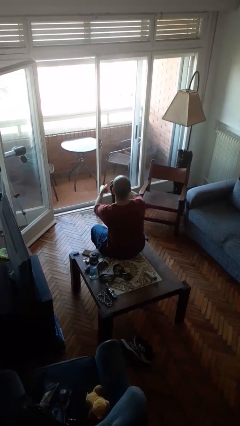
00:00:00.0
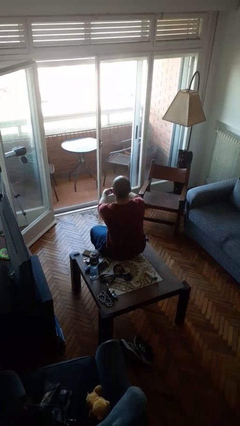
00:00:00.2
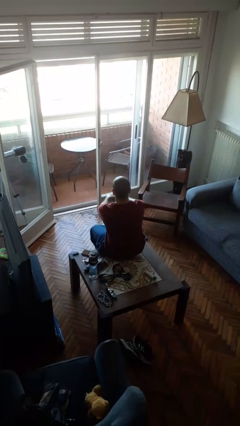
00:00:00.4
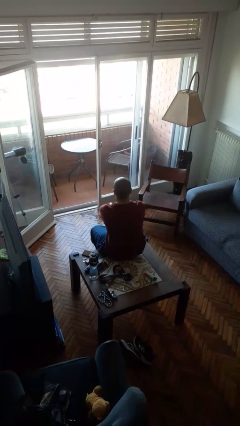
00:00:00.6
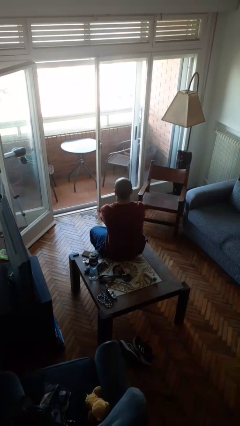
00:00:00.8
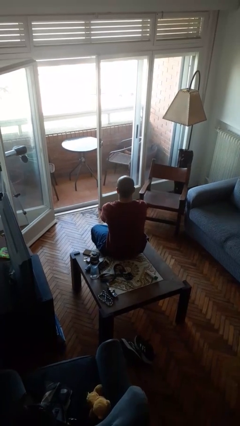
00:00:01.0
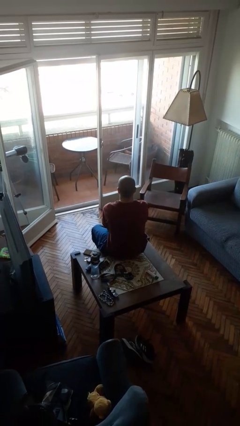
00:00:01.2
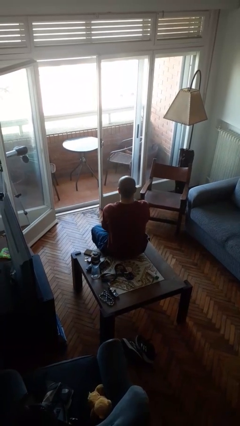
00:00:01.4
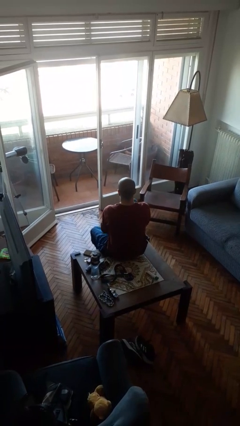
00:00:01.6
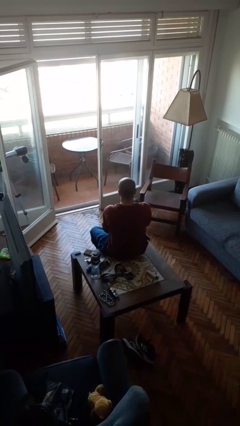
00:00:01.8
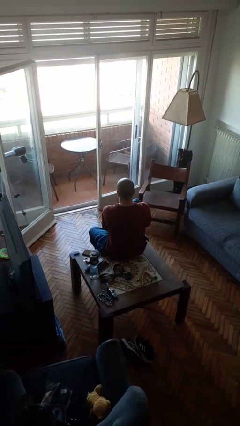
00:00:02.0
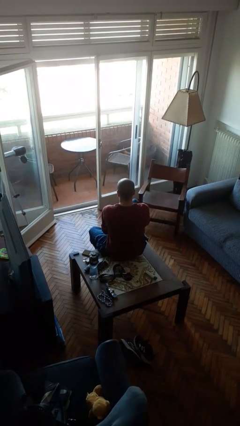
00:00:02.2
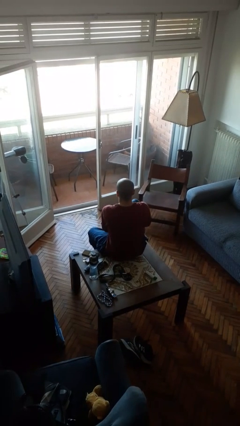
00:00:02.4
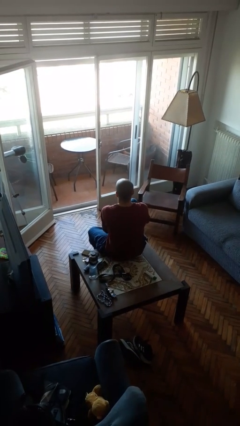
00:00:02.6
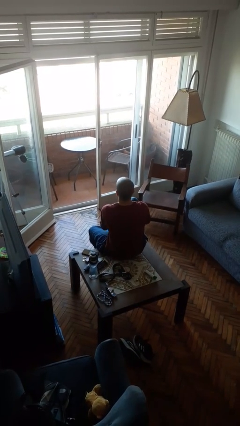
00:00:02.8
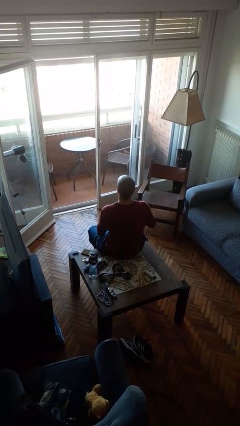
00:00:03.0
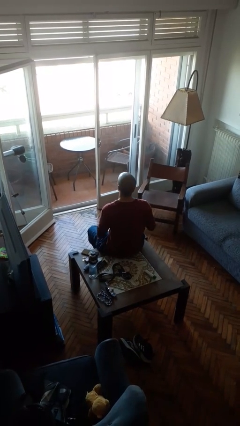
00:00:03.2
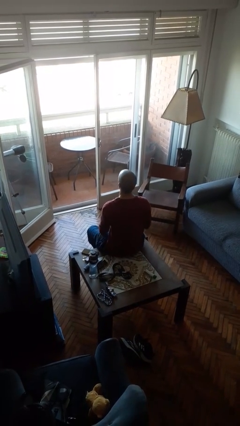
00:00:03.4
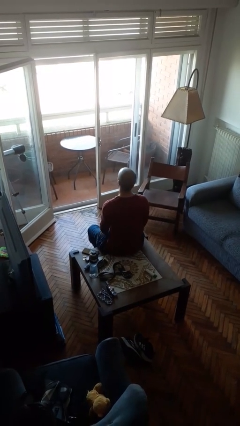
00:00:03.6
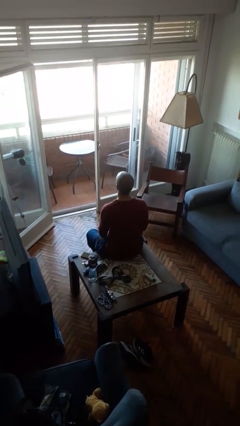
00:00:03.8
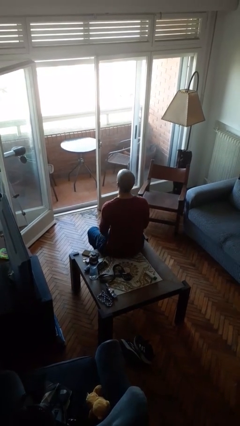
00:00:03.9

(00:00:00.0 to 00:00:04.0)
person puts on socks

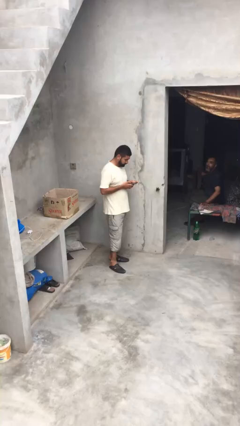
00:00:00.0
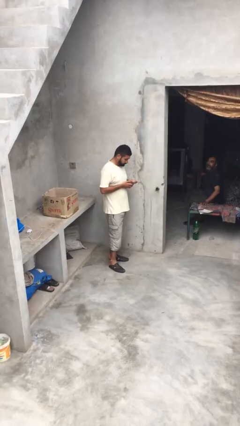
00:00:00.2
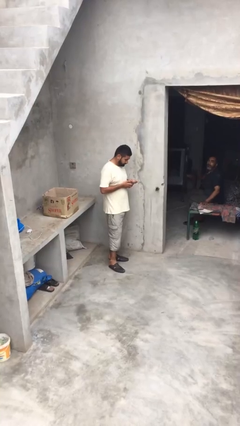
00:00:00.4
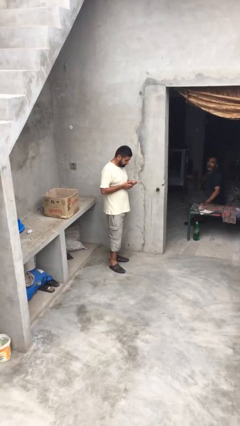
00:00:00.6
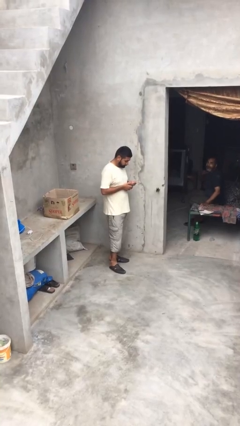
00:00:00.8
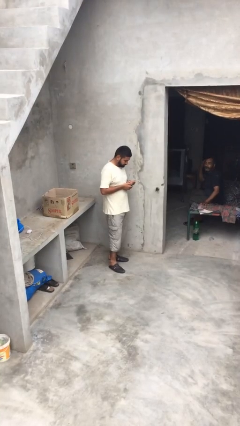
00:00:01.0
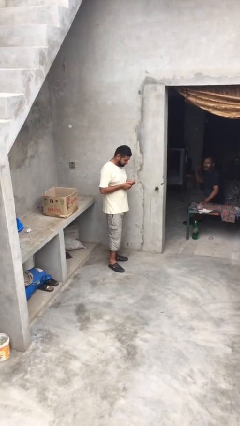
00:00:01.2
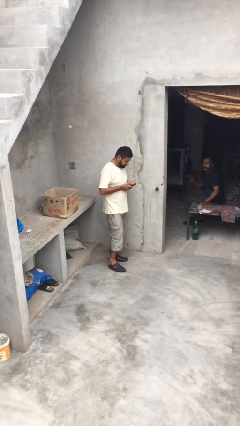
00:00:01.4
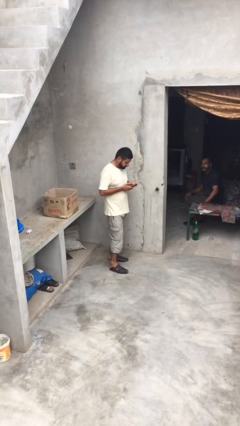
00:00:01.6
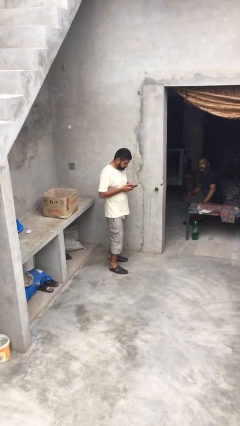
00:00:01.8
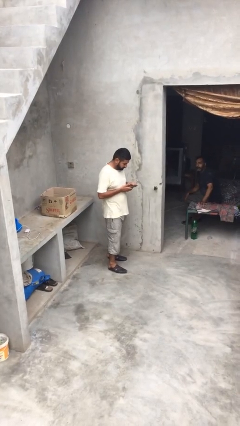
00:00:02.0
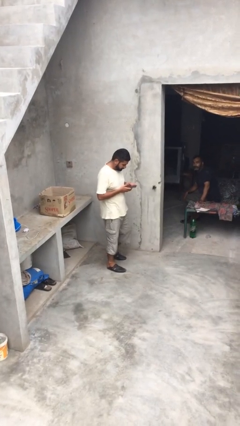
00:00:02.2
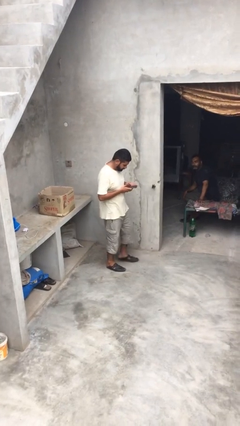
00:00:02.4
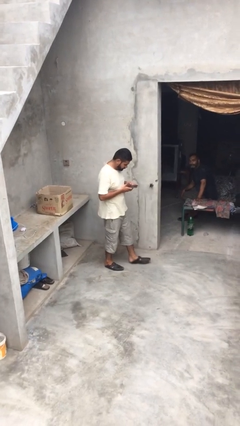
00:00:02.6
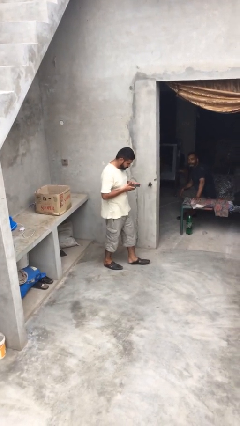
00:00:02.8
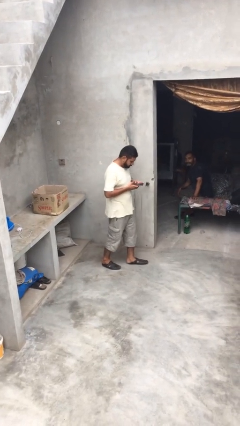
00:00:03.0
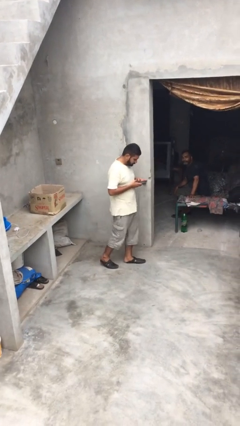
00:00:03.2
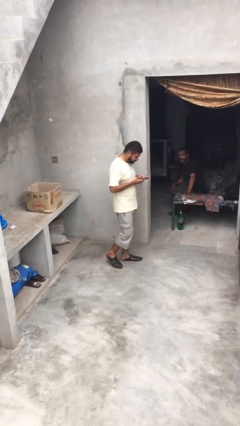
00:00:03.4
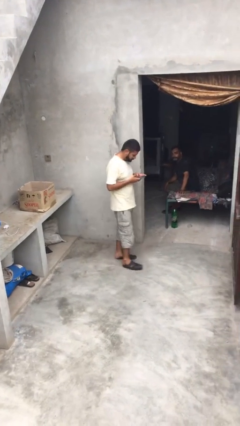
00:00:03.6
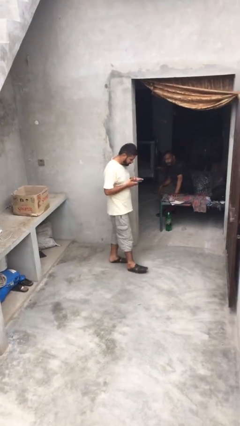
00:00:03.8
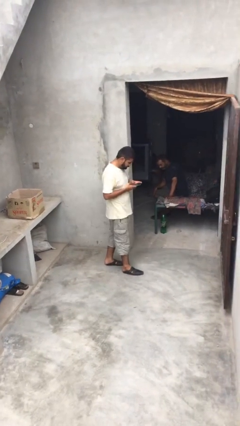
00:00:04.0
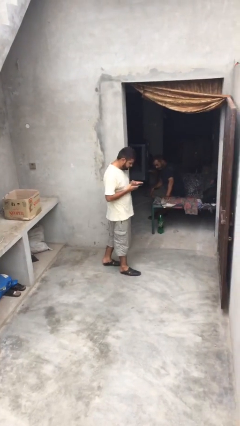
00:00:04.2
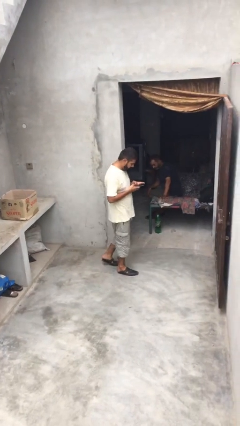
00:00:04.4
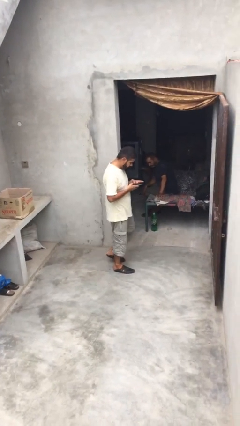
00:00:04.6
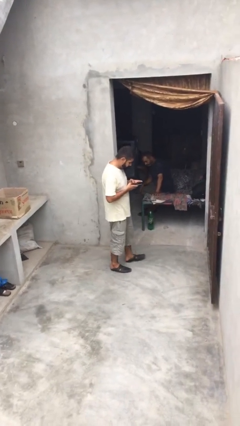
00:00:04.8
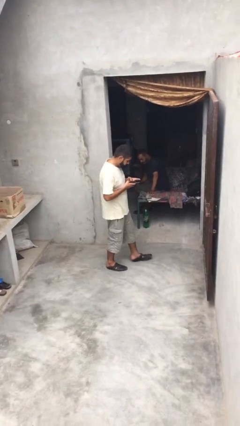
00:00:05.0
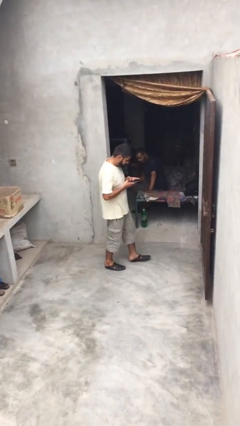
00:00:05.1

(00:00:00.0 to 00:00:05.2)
person texts on phone

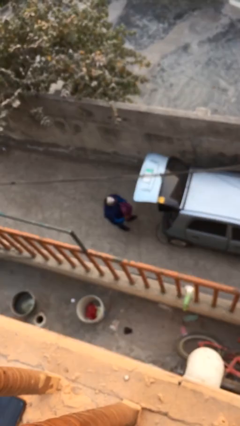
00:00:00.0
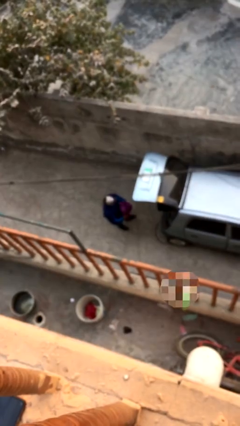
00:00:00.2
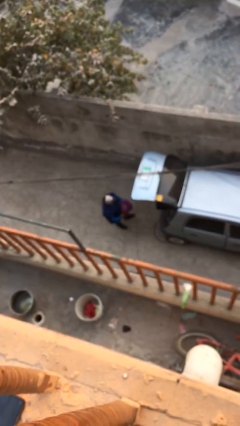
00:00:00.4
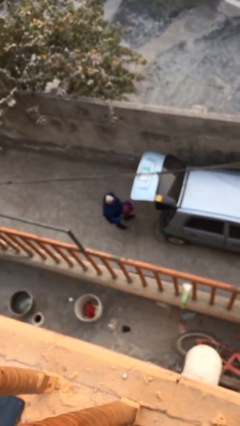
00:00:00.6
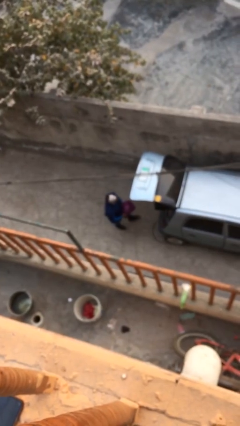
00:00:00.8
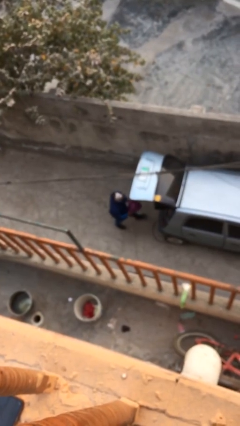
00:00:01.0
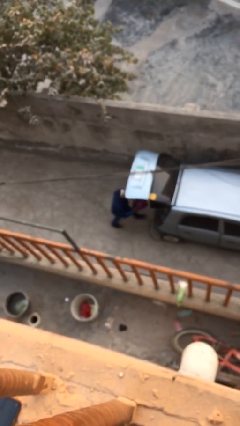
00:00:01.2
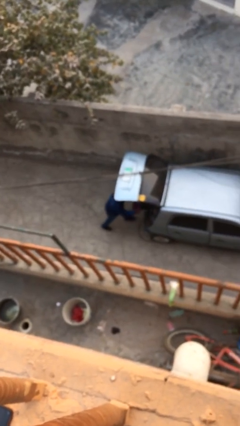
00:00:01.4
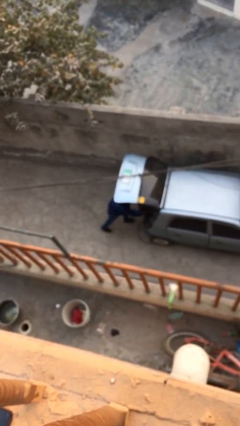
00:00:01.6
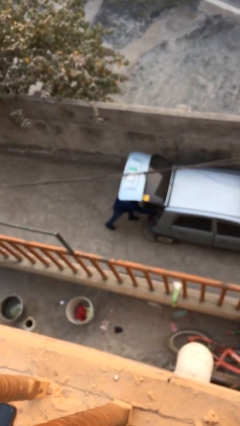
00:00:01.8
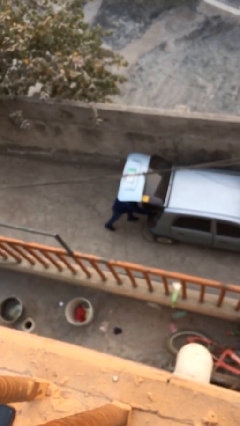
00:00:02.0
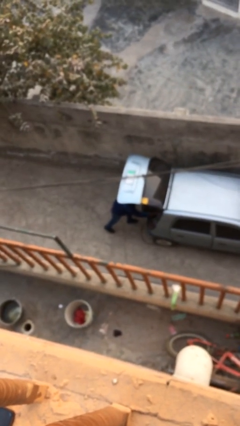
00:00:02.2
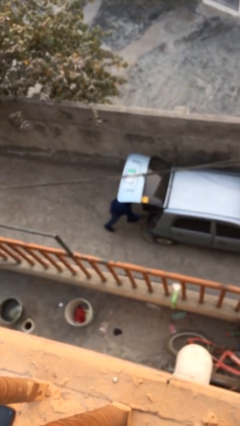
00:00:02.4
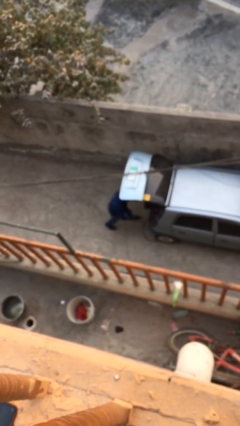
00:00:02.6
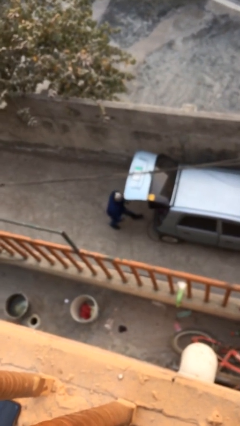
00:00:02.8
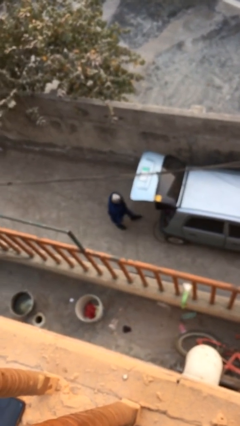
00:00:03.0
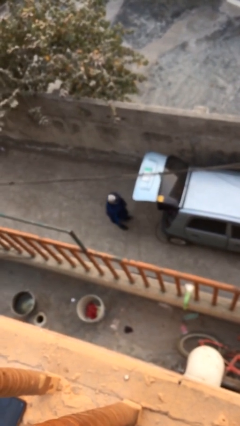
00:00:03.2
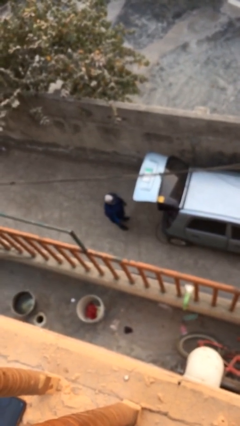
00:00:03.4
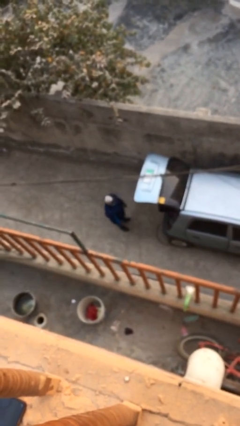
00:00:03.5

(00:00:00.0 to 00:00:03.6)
person loads car

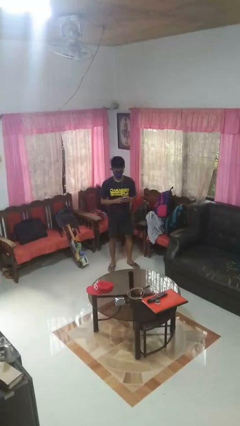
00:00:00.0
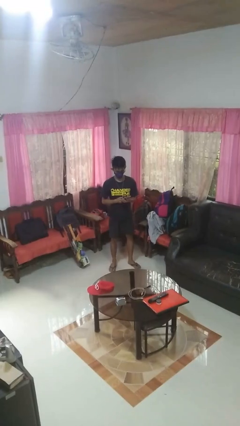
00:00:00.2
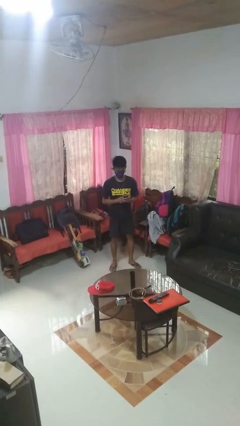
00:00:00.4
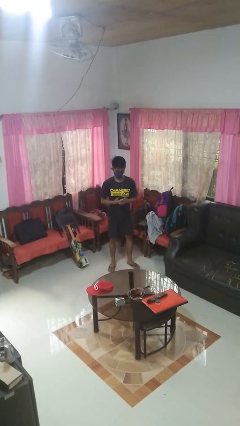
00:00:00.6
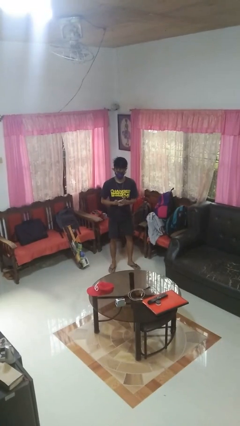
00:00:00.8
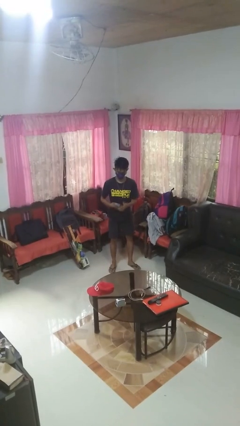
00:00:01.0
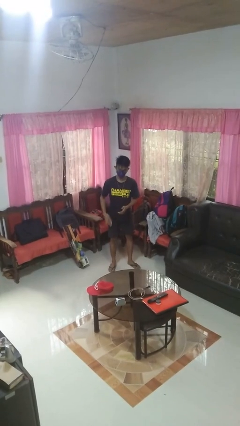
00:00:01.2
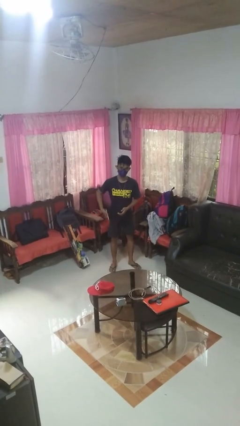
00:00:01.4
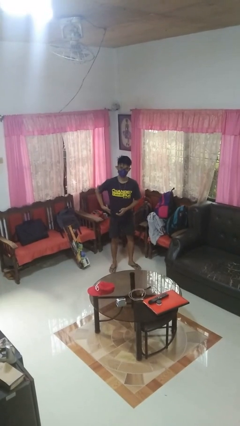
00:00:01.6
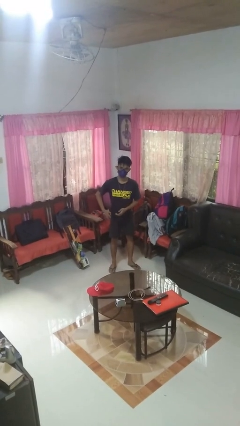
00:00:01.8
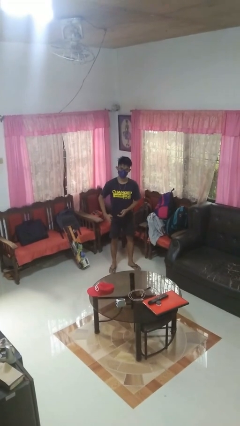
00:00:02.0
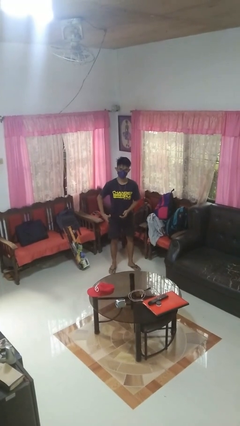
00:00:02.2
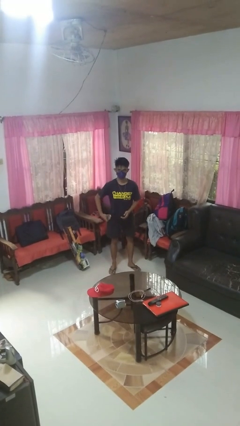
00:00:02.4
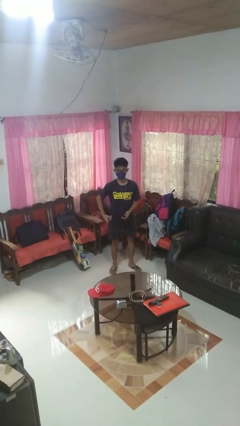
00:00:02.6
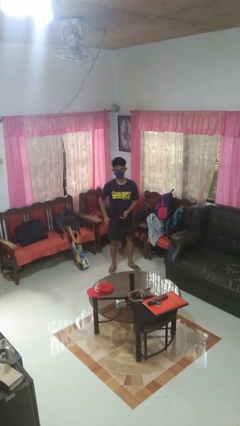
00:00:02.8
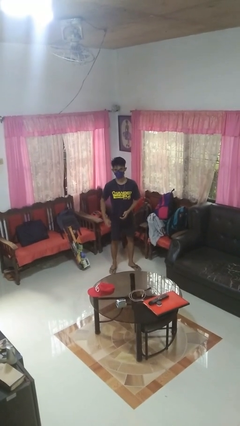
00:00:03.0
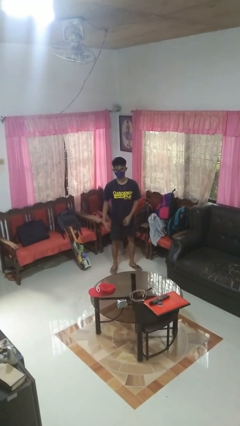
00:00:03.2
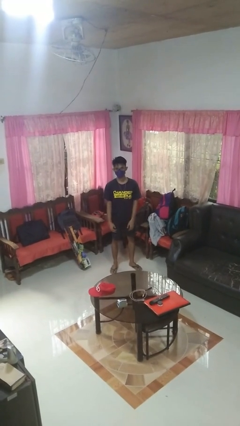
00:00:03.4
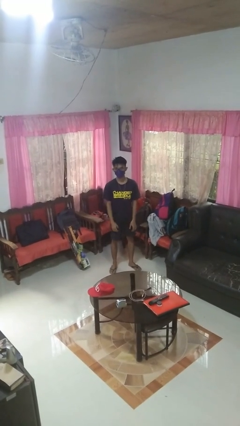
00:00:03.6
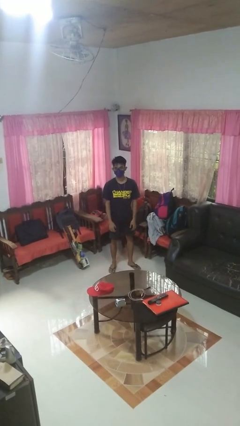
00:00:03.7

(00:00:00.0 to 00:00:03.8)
person puts phone into pocket

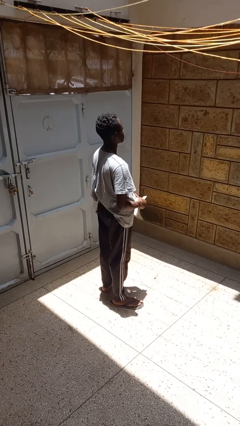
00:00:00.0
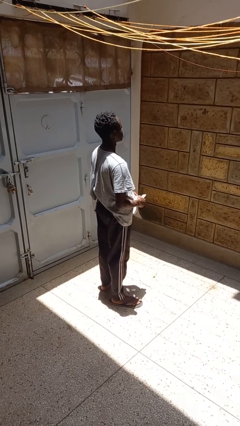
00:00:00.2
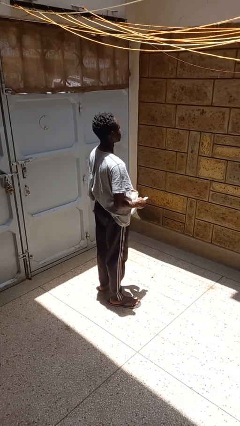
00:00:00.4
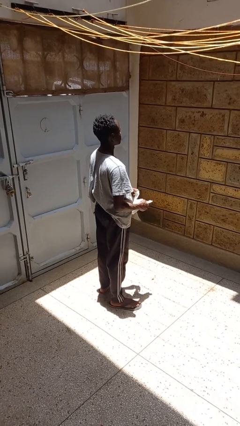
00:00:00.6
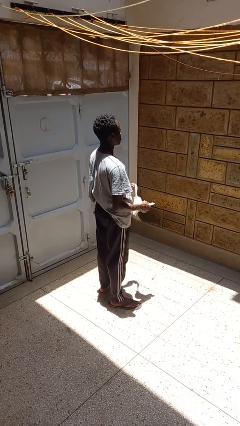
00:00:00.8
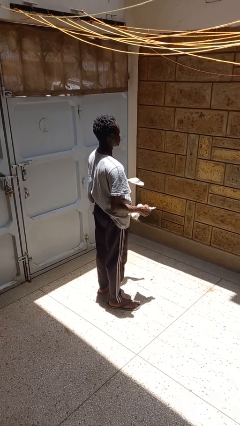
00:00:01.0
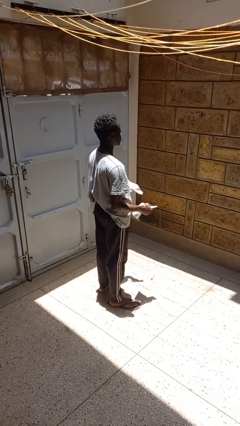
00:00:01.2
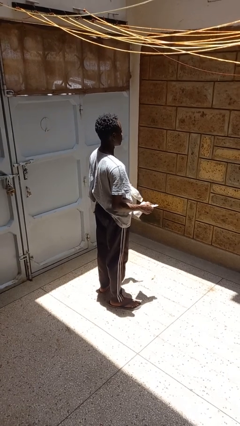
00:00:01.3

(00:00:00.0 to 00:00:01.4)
person tears paper
